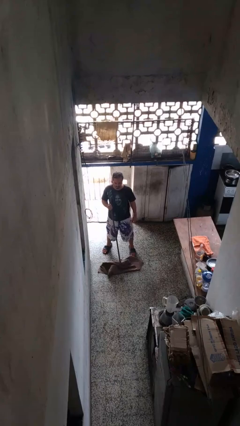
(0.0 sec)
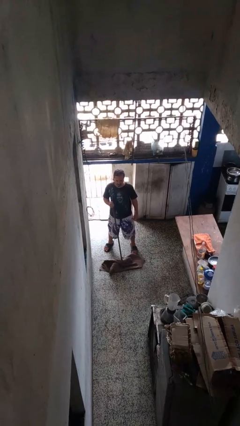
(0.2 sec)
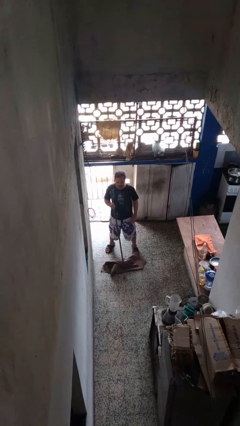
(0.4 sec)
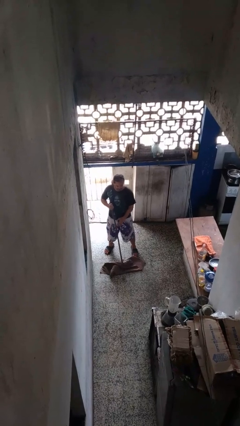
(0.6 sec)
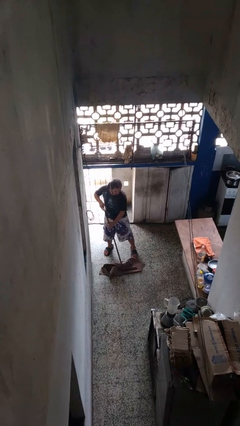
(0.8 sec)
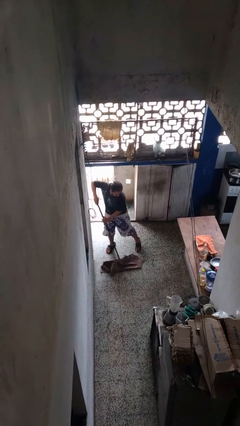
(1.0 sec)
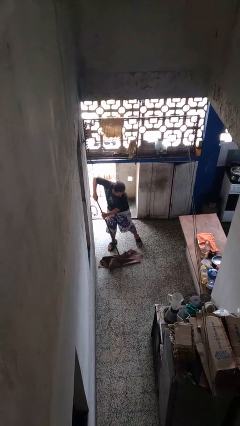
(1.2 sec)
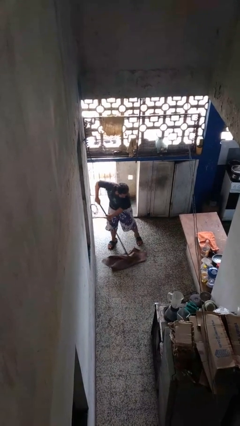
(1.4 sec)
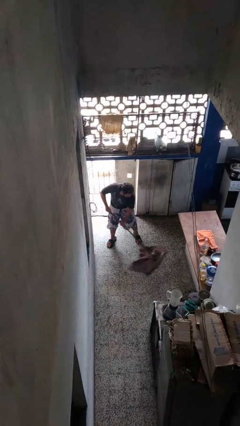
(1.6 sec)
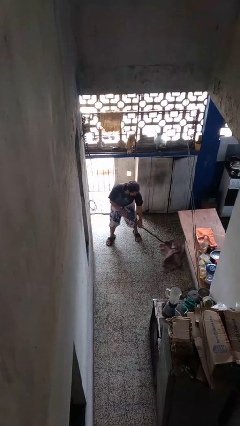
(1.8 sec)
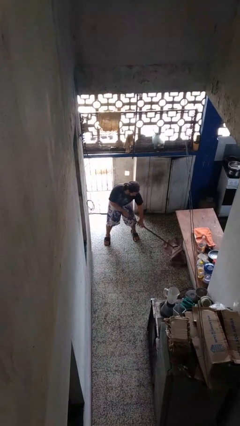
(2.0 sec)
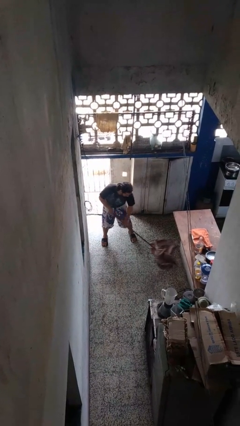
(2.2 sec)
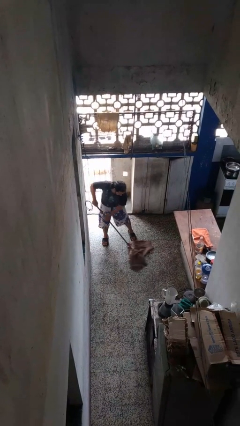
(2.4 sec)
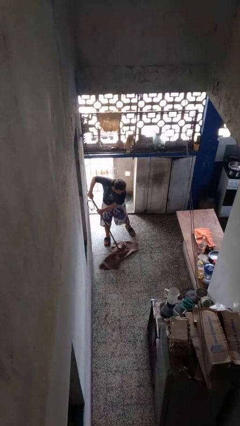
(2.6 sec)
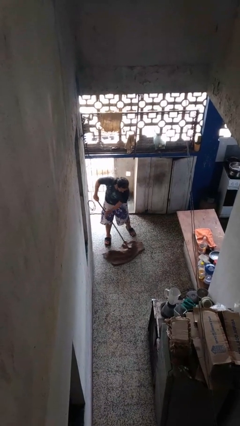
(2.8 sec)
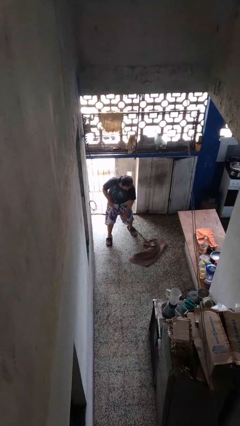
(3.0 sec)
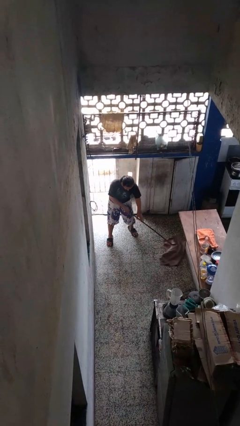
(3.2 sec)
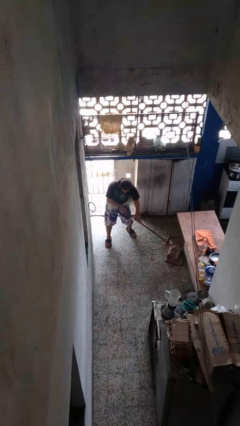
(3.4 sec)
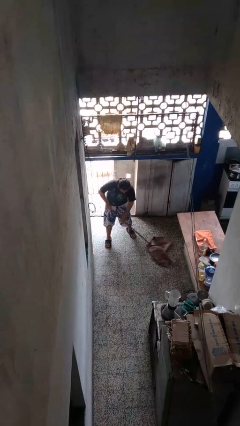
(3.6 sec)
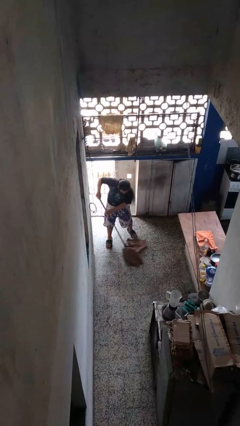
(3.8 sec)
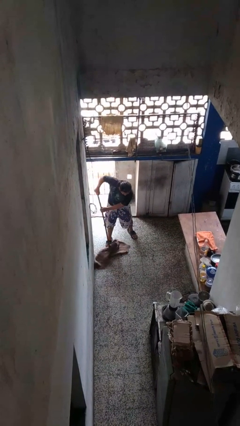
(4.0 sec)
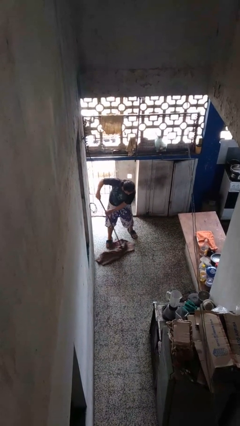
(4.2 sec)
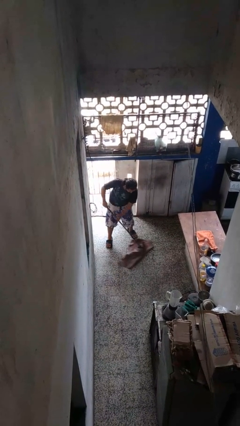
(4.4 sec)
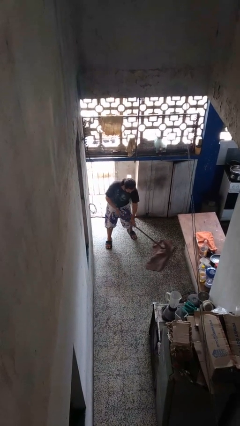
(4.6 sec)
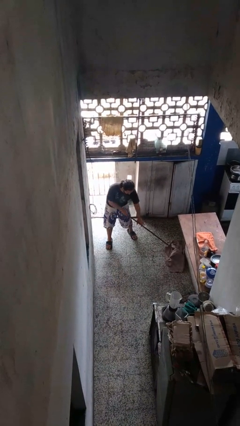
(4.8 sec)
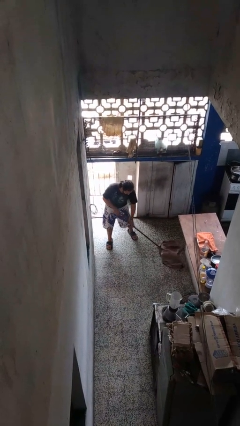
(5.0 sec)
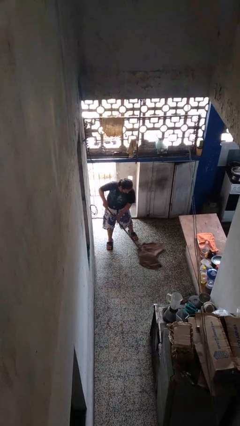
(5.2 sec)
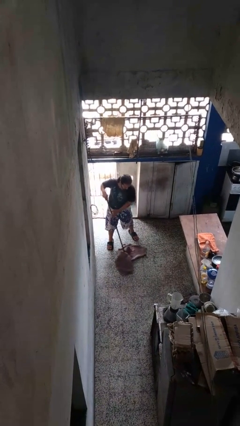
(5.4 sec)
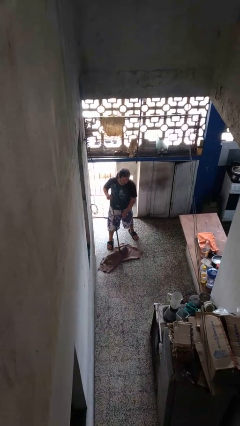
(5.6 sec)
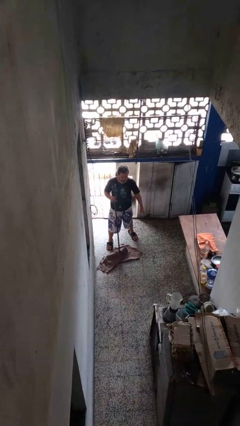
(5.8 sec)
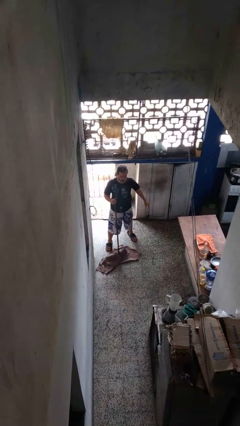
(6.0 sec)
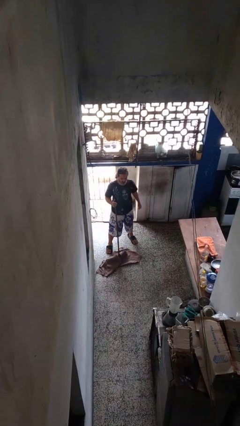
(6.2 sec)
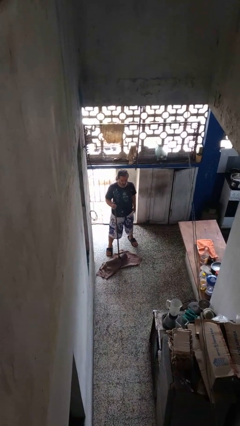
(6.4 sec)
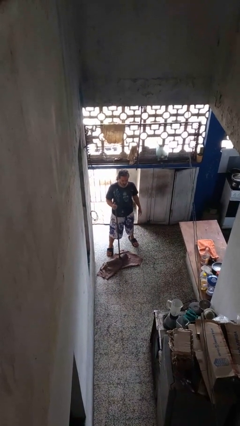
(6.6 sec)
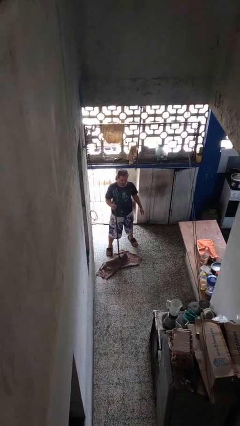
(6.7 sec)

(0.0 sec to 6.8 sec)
person mops

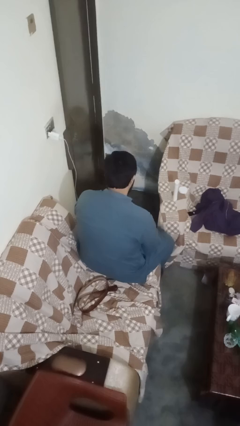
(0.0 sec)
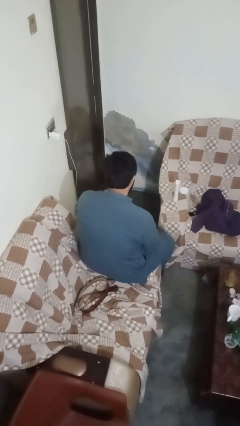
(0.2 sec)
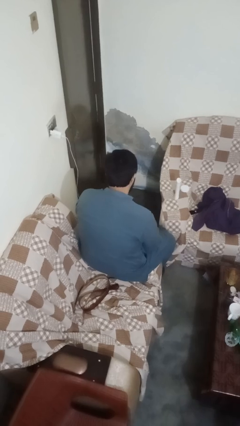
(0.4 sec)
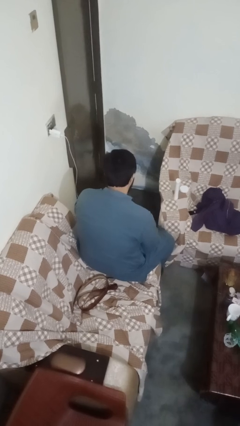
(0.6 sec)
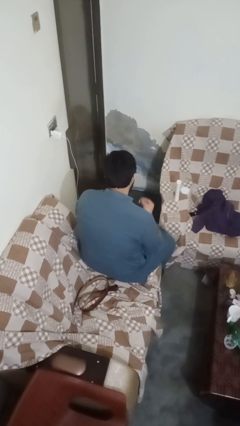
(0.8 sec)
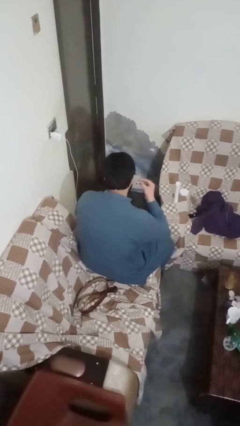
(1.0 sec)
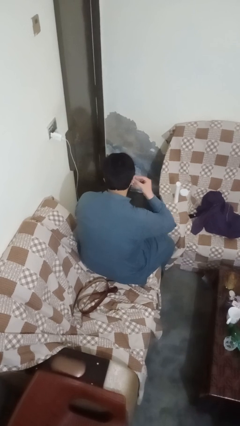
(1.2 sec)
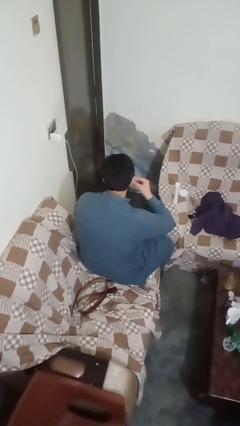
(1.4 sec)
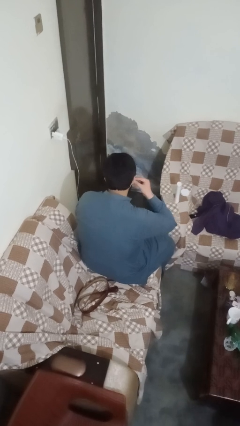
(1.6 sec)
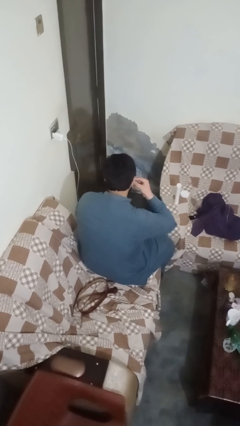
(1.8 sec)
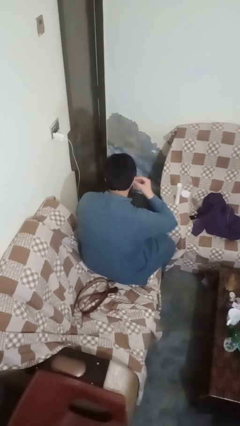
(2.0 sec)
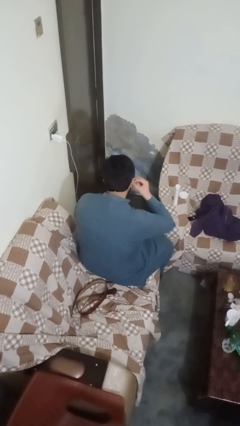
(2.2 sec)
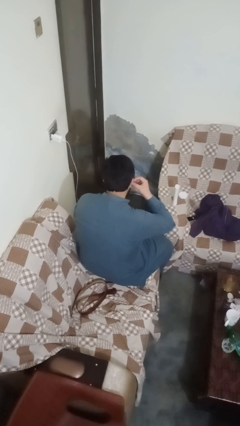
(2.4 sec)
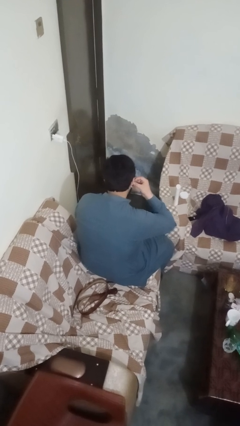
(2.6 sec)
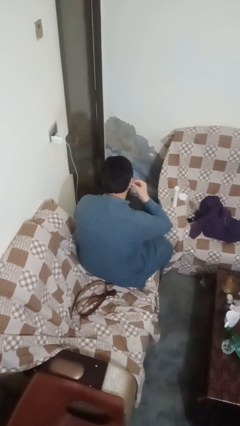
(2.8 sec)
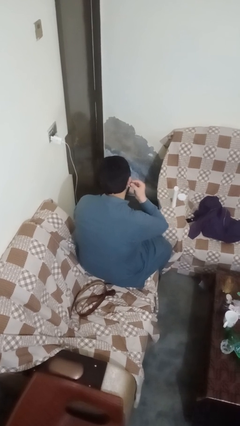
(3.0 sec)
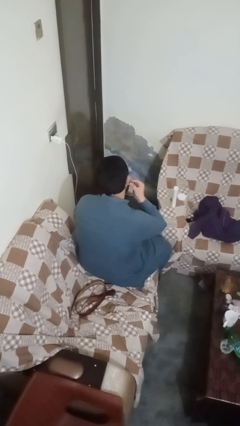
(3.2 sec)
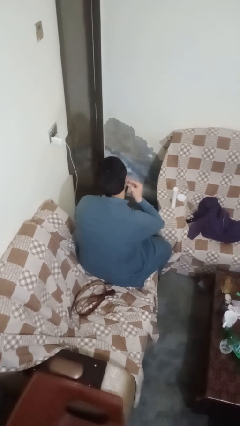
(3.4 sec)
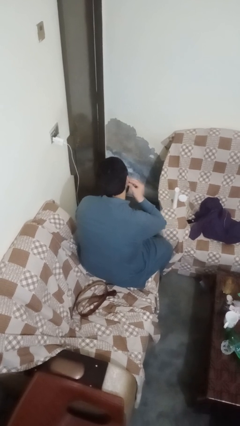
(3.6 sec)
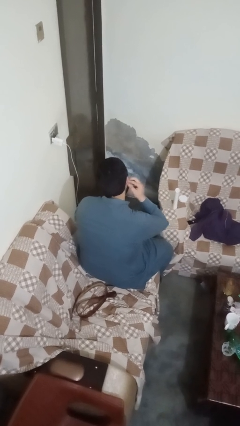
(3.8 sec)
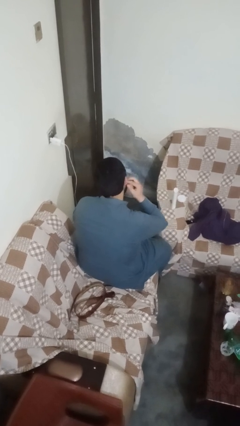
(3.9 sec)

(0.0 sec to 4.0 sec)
person puts on earrings

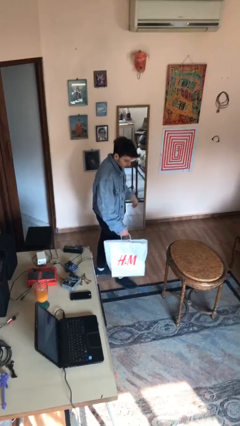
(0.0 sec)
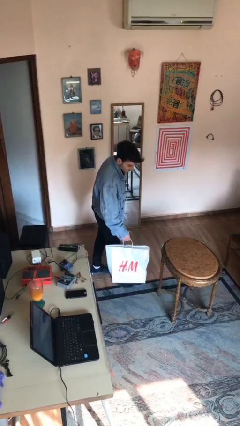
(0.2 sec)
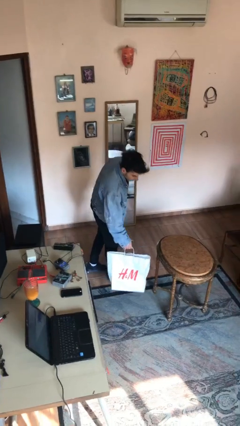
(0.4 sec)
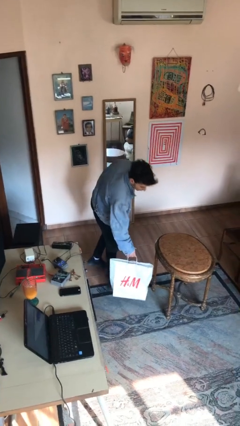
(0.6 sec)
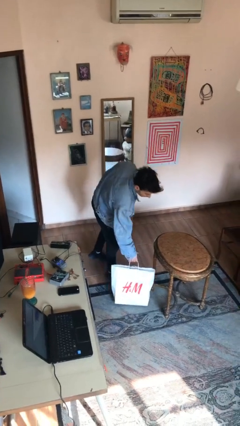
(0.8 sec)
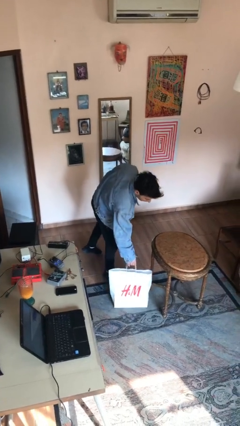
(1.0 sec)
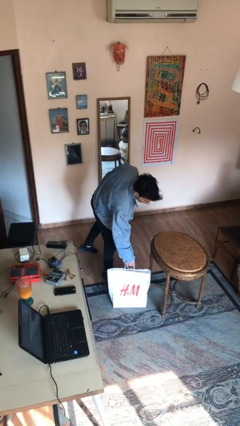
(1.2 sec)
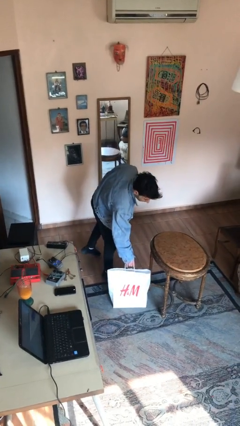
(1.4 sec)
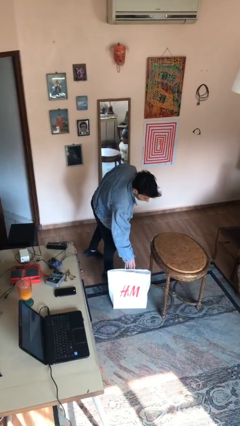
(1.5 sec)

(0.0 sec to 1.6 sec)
person puts down object on floor

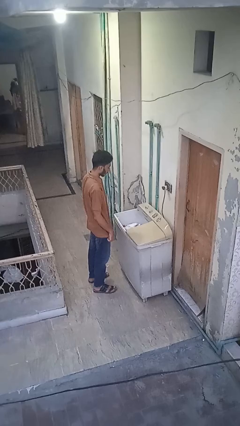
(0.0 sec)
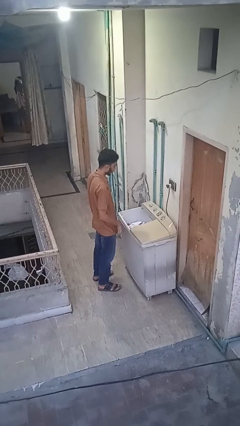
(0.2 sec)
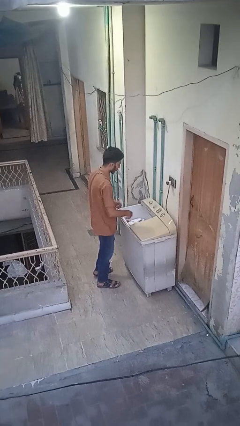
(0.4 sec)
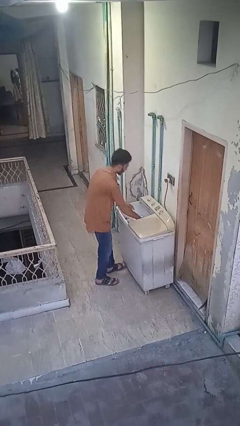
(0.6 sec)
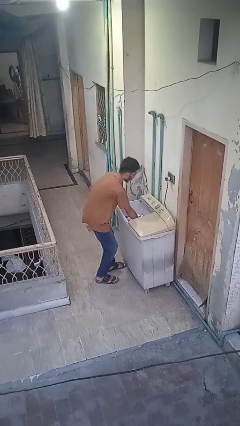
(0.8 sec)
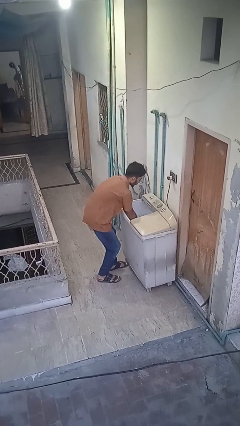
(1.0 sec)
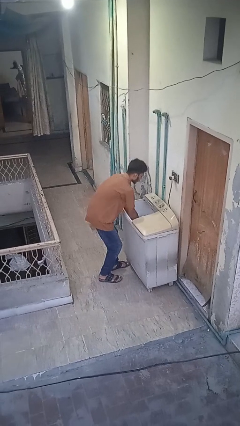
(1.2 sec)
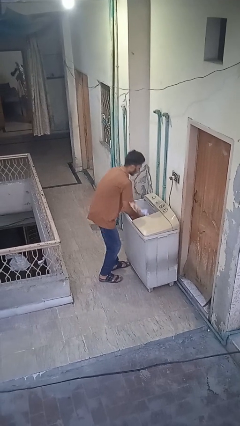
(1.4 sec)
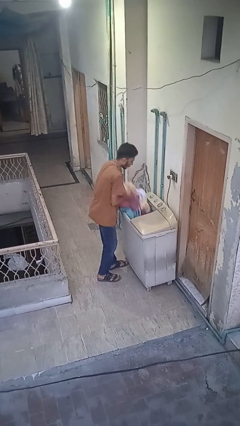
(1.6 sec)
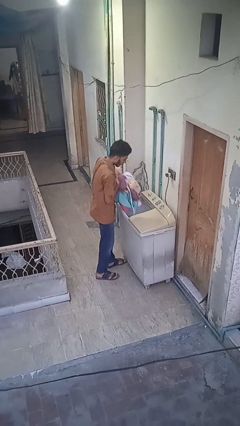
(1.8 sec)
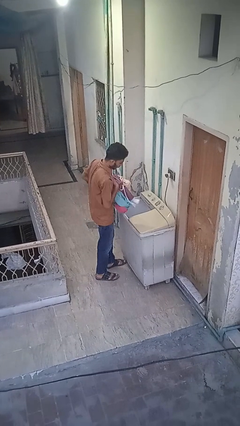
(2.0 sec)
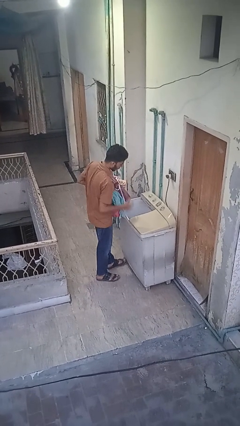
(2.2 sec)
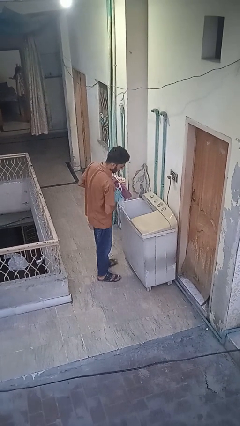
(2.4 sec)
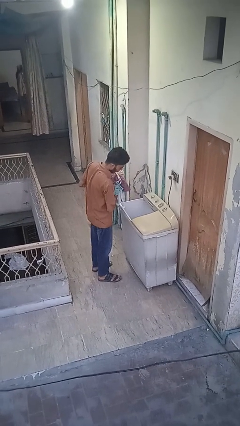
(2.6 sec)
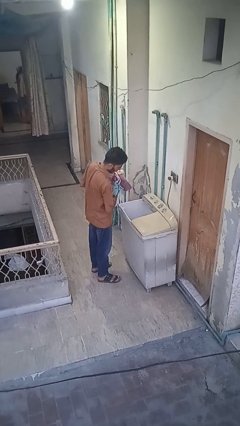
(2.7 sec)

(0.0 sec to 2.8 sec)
person unloads clotheswasher

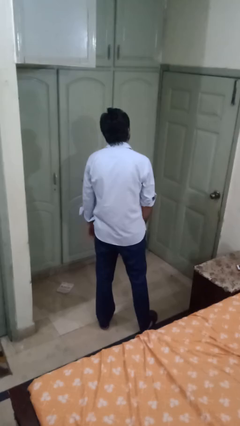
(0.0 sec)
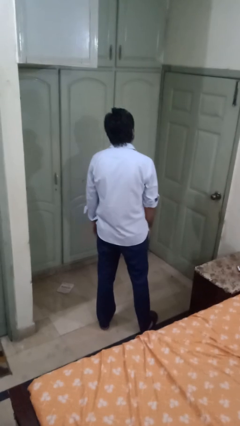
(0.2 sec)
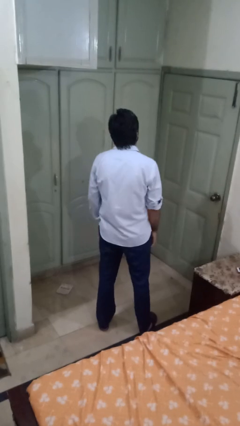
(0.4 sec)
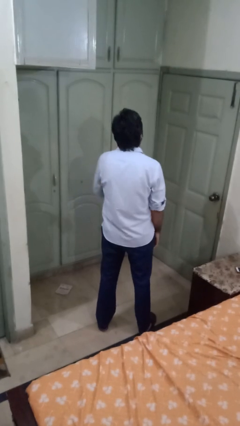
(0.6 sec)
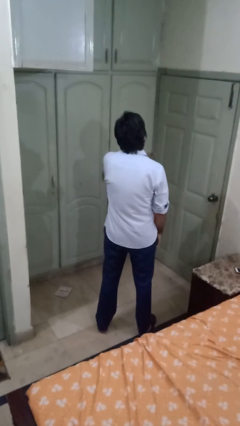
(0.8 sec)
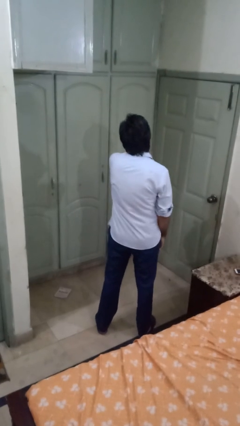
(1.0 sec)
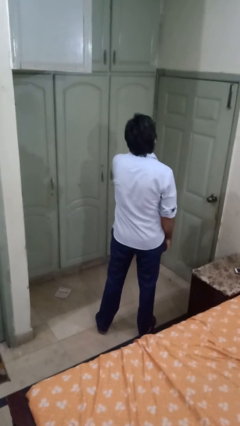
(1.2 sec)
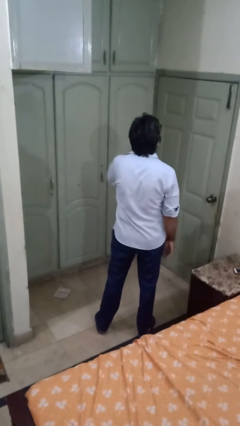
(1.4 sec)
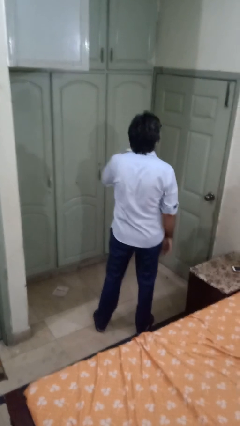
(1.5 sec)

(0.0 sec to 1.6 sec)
person gestures cut

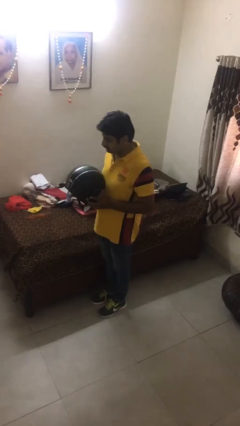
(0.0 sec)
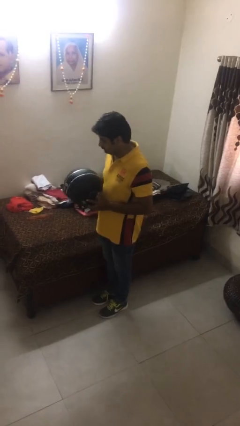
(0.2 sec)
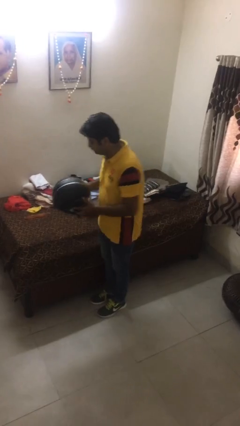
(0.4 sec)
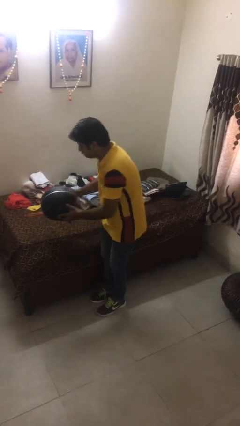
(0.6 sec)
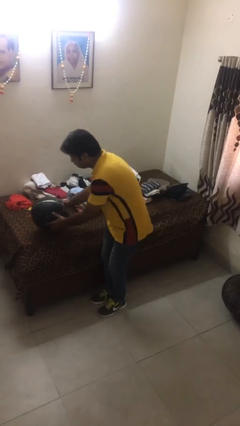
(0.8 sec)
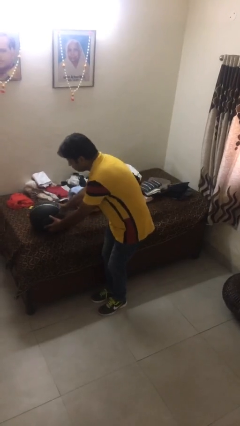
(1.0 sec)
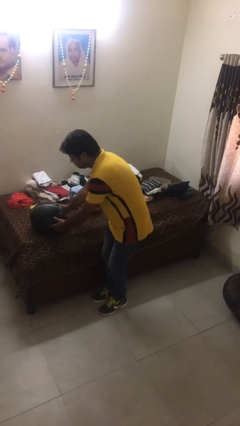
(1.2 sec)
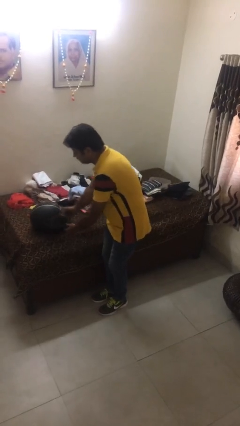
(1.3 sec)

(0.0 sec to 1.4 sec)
person puts down object on bed
